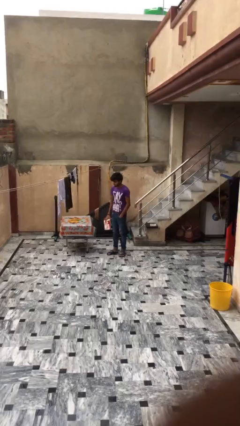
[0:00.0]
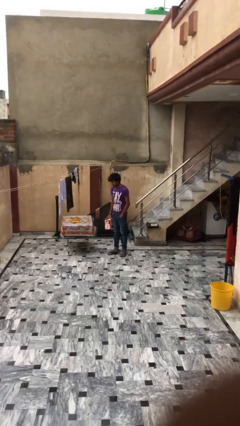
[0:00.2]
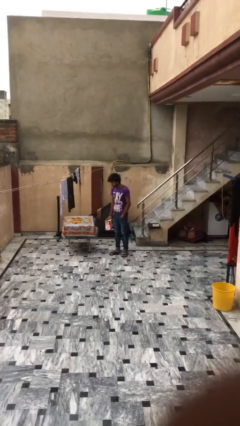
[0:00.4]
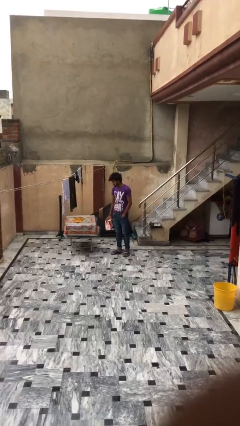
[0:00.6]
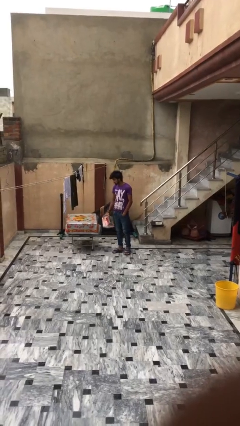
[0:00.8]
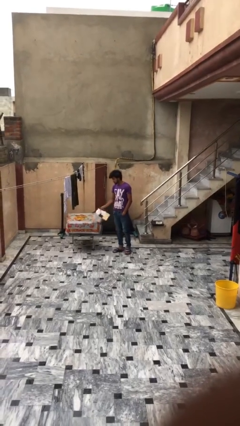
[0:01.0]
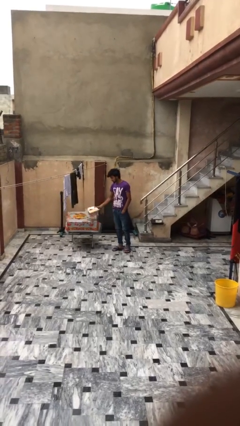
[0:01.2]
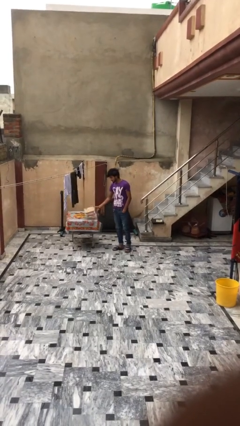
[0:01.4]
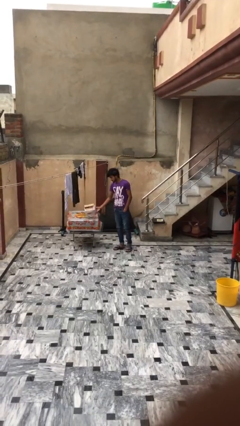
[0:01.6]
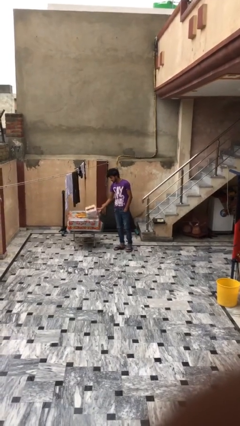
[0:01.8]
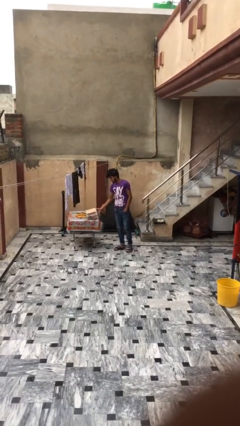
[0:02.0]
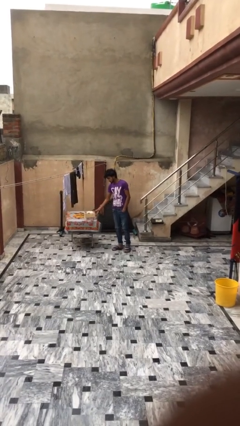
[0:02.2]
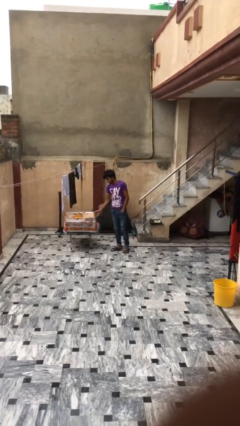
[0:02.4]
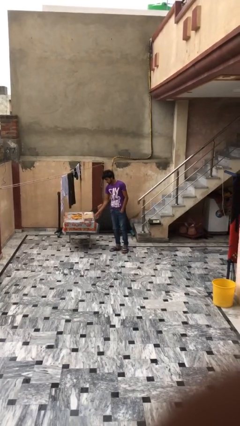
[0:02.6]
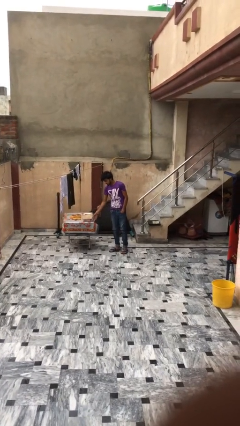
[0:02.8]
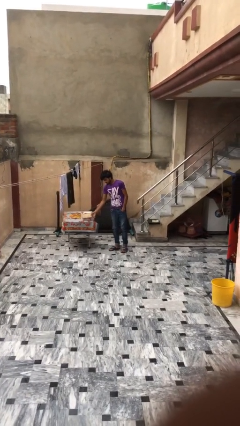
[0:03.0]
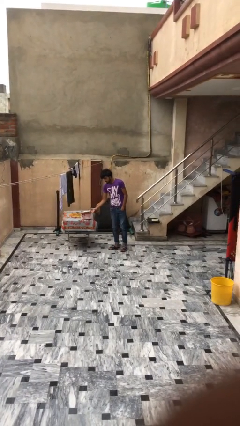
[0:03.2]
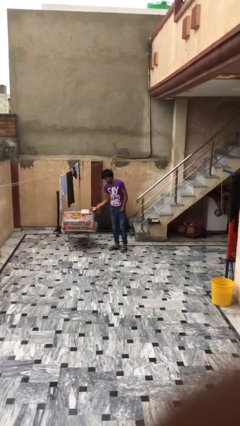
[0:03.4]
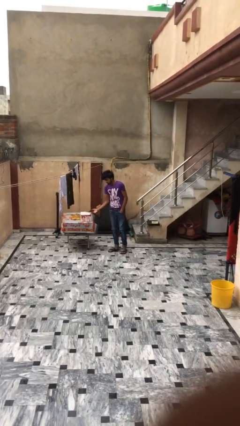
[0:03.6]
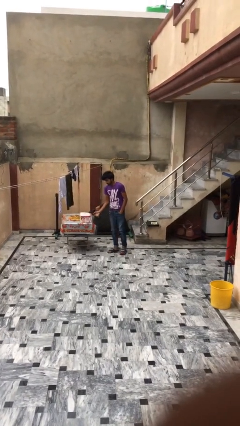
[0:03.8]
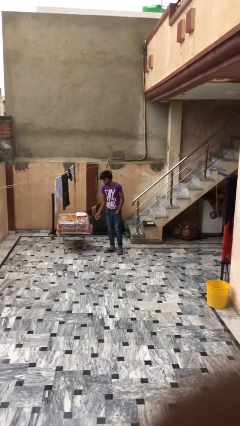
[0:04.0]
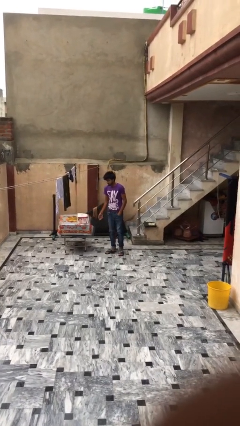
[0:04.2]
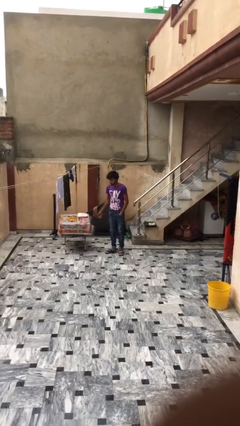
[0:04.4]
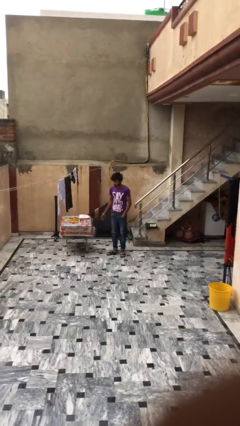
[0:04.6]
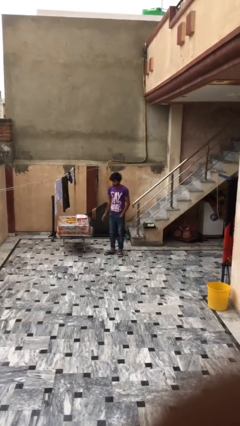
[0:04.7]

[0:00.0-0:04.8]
person puts down object on table

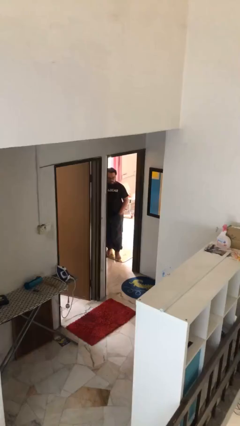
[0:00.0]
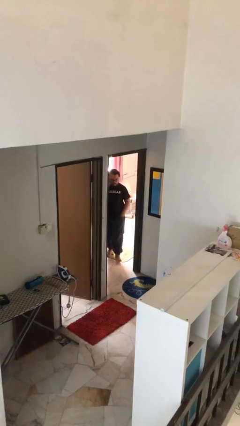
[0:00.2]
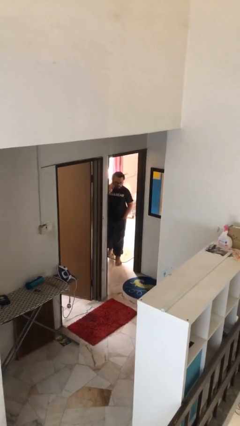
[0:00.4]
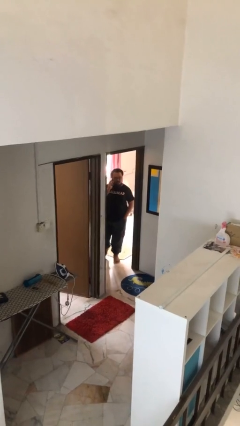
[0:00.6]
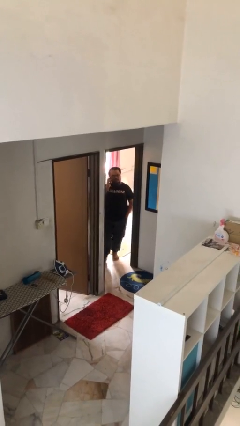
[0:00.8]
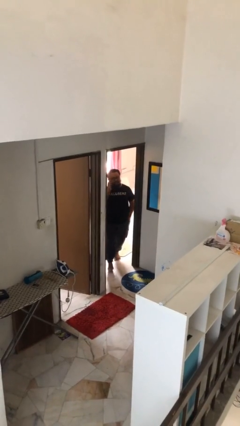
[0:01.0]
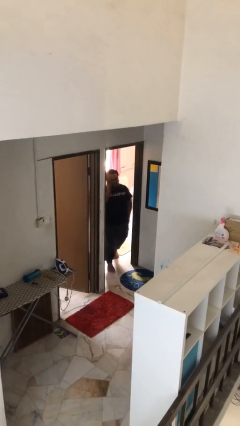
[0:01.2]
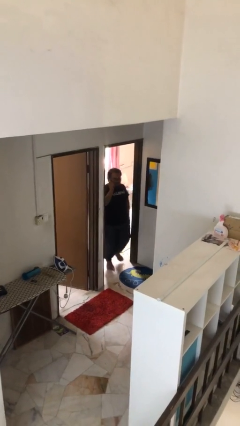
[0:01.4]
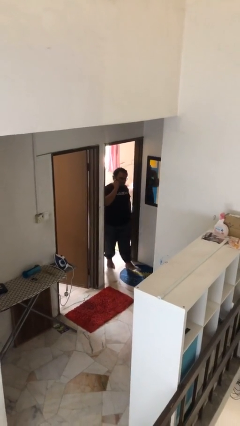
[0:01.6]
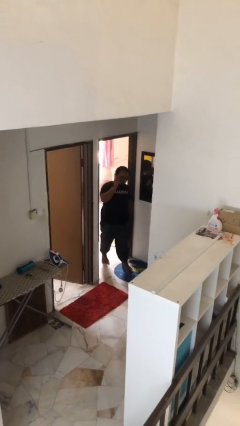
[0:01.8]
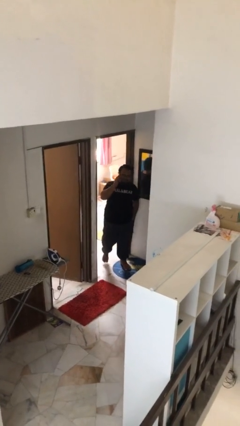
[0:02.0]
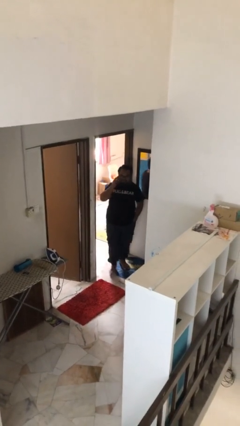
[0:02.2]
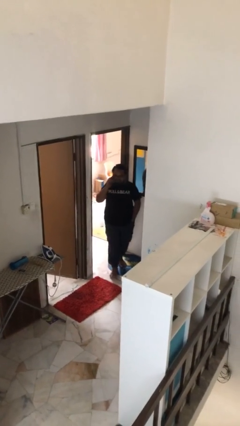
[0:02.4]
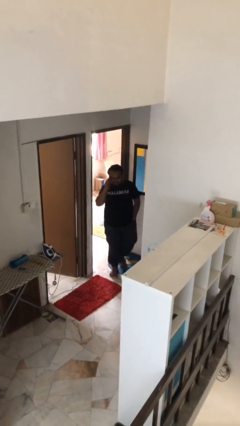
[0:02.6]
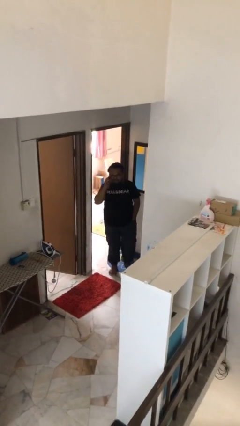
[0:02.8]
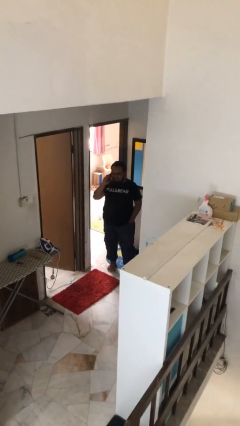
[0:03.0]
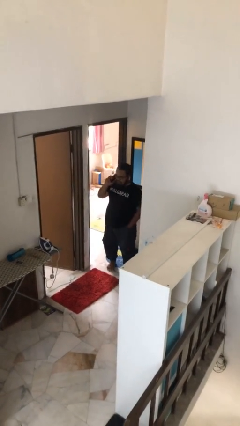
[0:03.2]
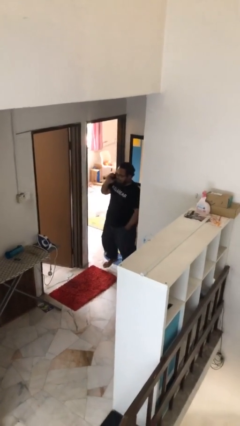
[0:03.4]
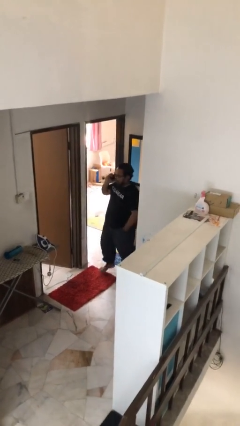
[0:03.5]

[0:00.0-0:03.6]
person enters scene through structure

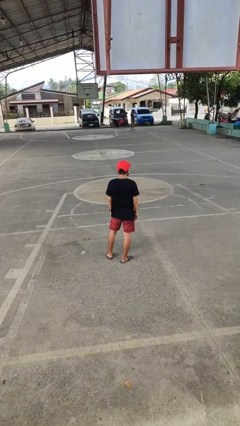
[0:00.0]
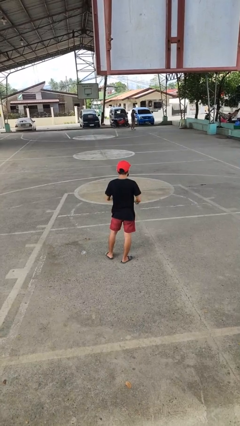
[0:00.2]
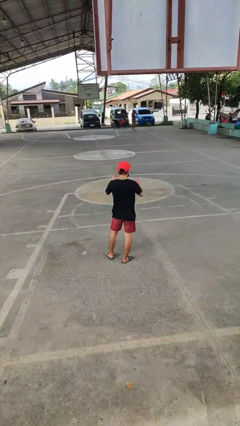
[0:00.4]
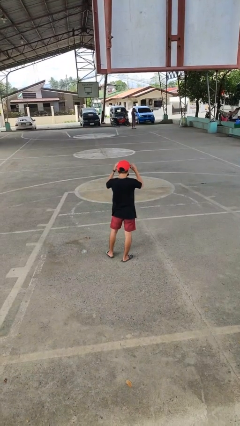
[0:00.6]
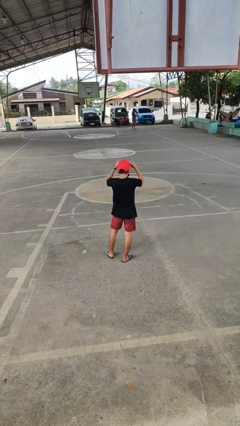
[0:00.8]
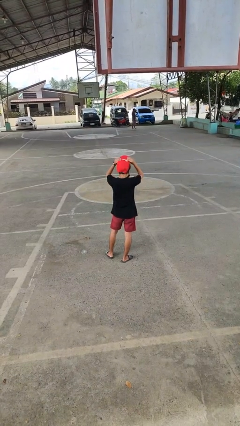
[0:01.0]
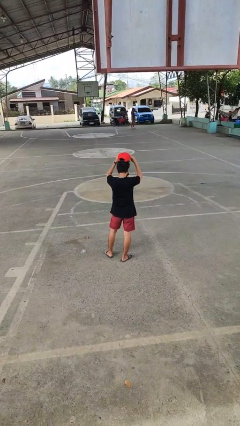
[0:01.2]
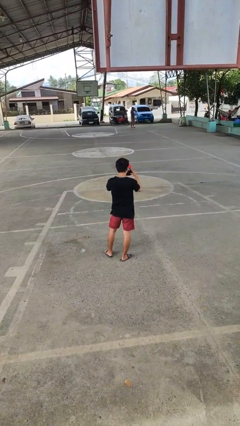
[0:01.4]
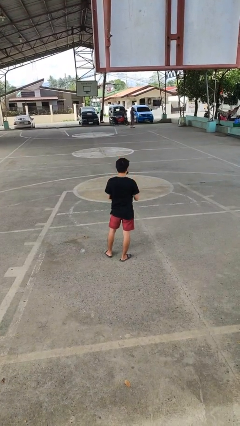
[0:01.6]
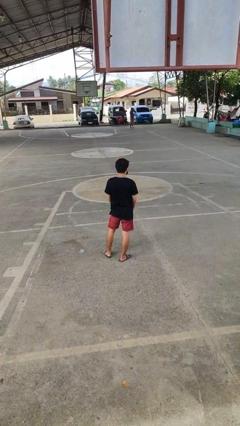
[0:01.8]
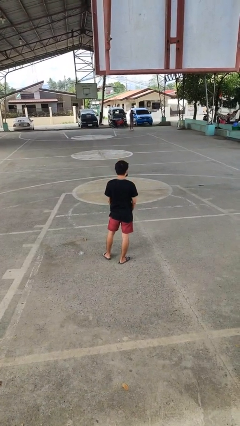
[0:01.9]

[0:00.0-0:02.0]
person takes off hat

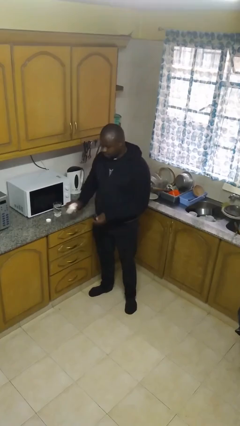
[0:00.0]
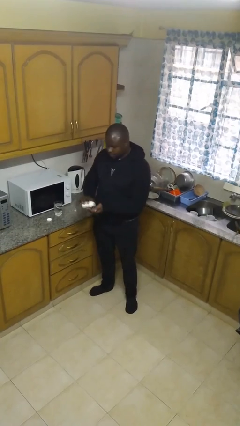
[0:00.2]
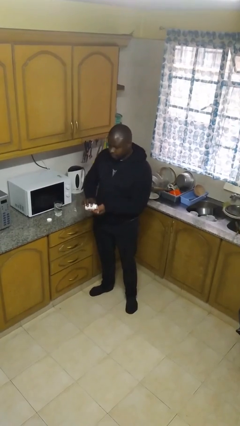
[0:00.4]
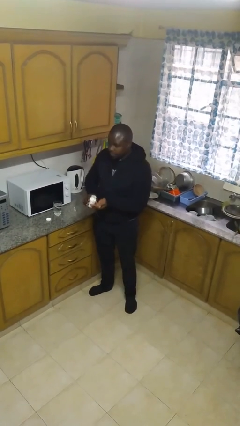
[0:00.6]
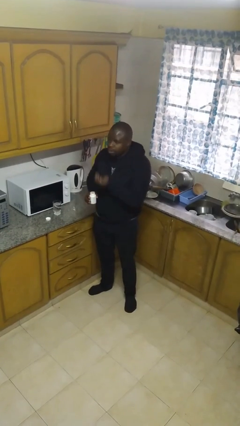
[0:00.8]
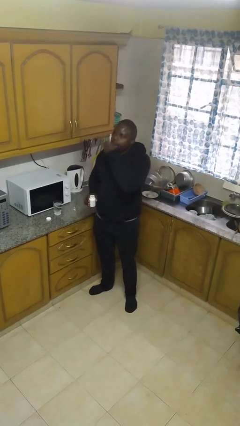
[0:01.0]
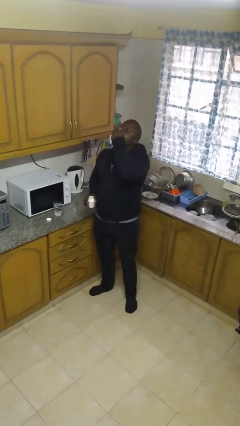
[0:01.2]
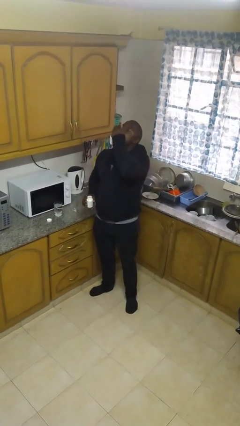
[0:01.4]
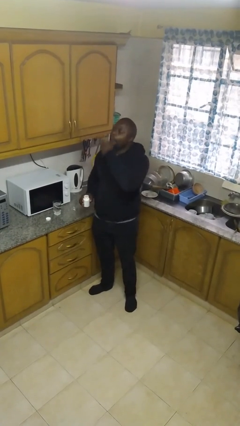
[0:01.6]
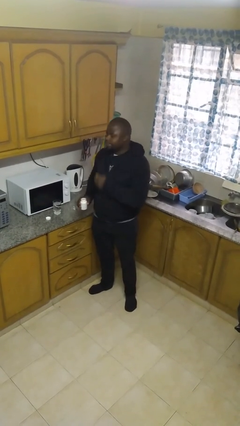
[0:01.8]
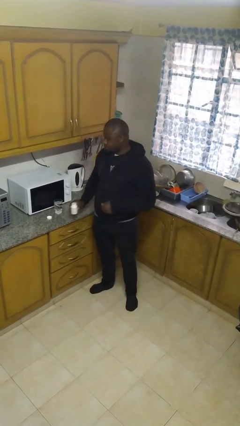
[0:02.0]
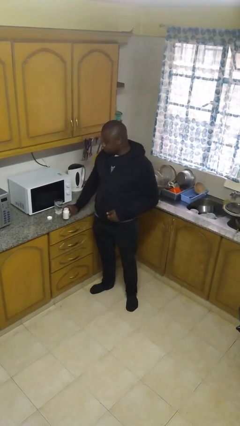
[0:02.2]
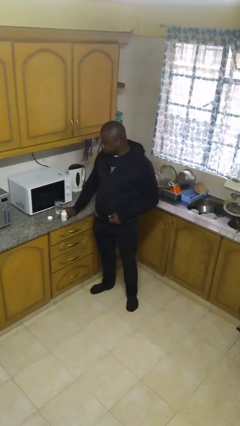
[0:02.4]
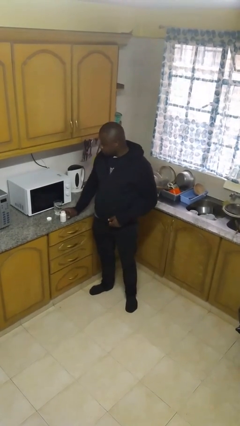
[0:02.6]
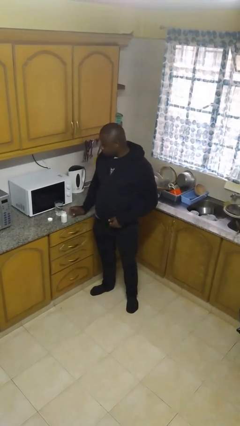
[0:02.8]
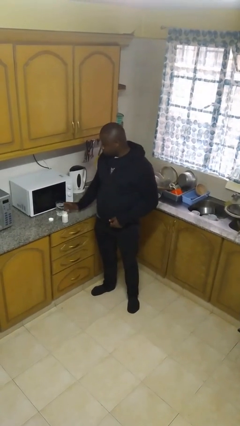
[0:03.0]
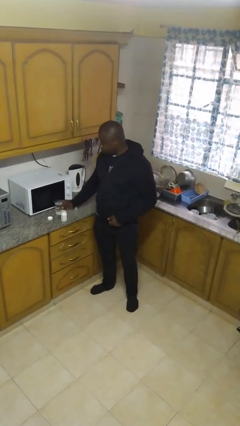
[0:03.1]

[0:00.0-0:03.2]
person takes medicine pills

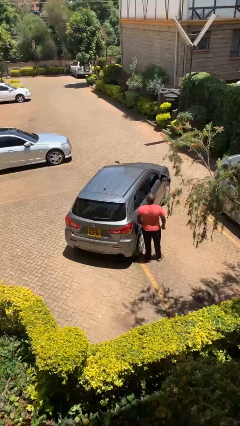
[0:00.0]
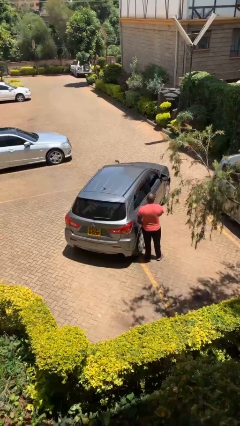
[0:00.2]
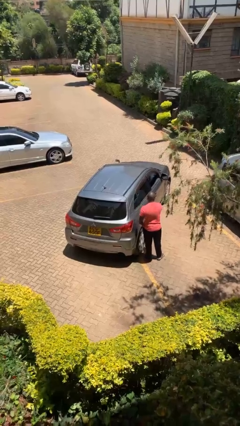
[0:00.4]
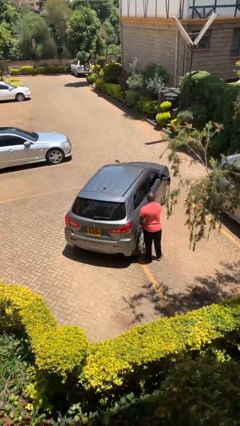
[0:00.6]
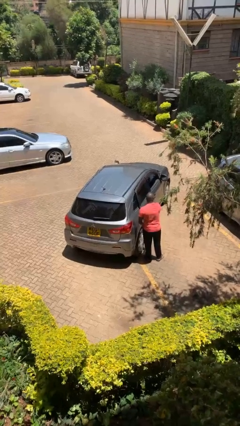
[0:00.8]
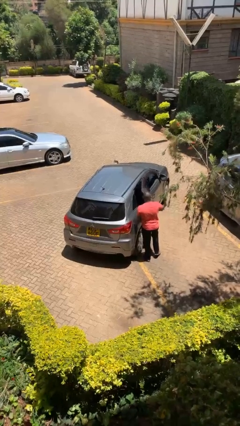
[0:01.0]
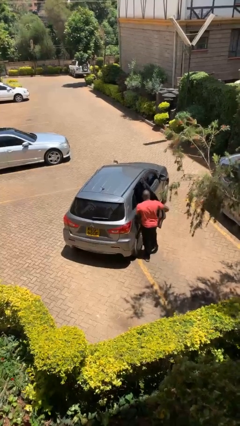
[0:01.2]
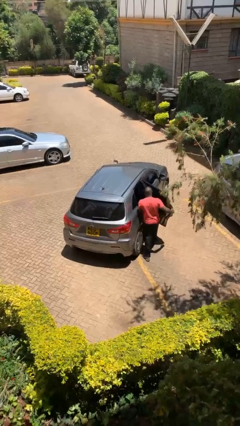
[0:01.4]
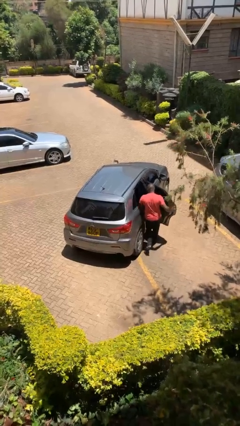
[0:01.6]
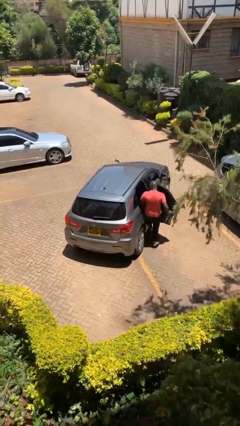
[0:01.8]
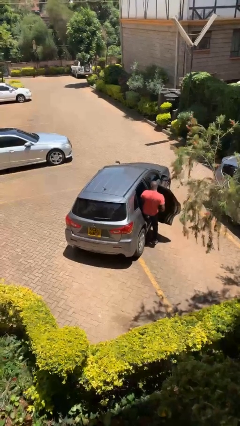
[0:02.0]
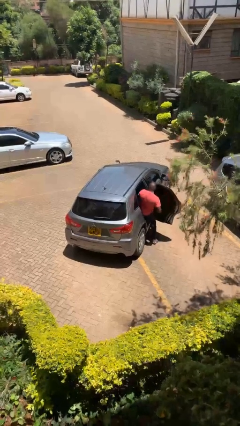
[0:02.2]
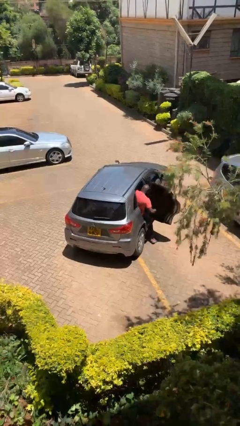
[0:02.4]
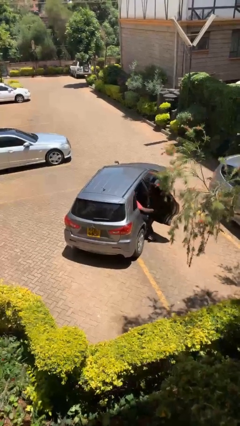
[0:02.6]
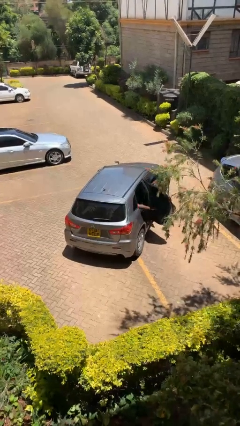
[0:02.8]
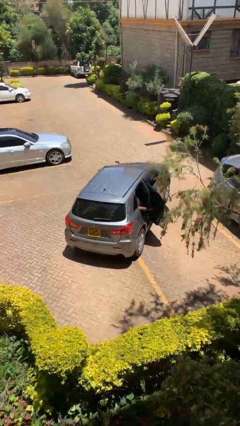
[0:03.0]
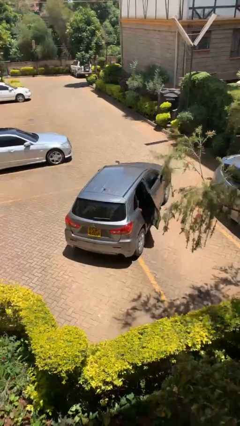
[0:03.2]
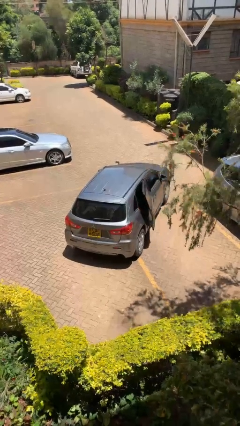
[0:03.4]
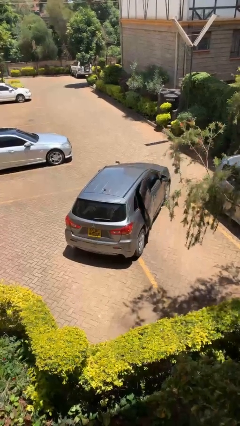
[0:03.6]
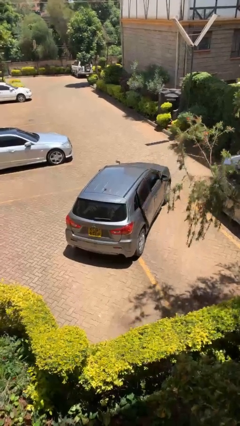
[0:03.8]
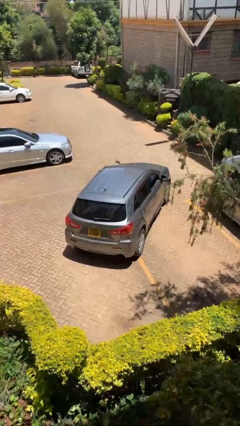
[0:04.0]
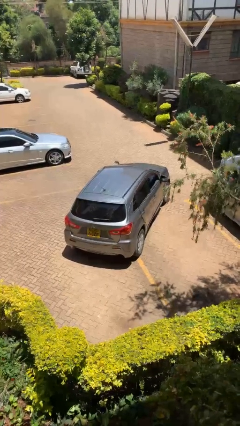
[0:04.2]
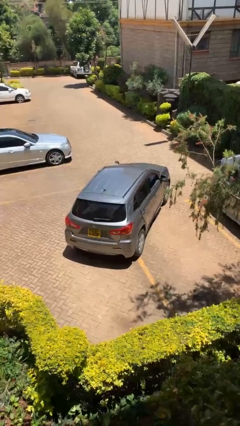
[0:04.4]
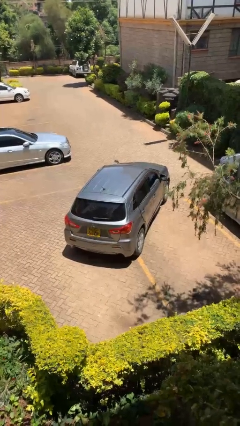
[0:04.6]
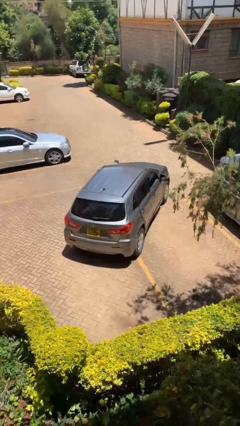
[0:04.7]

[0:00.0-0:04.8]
car picks up person
